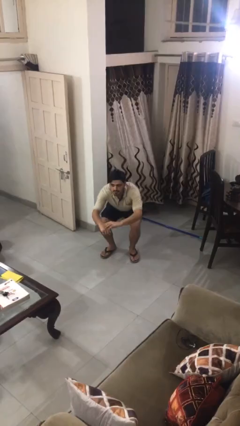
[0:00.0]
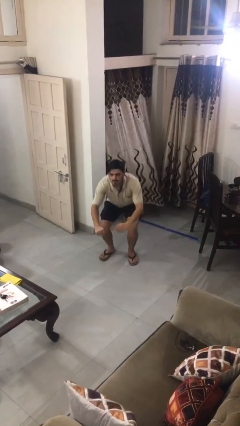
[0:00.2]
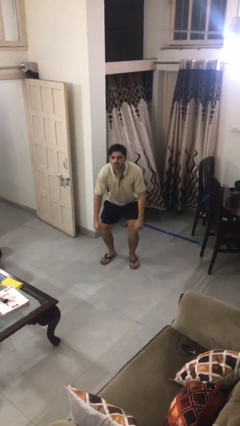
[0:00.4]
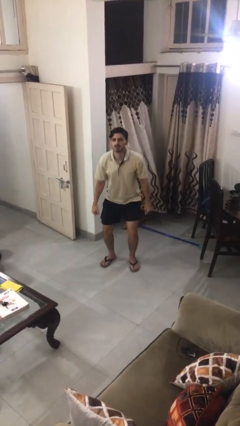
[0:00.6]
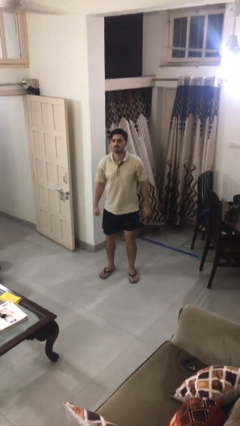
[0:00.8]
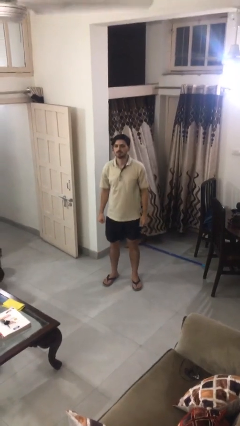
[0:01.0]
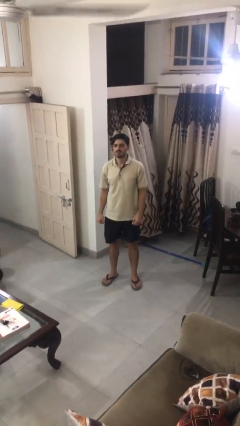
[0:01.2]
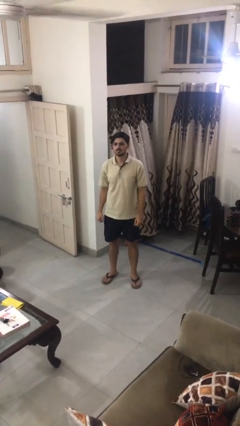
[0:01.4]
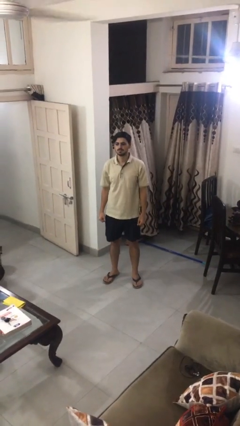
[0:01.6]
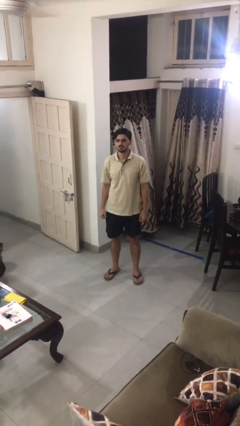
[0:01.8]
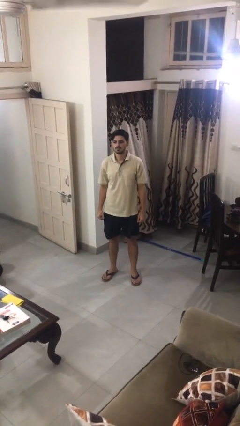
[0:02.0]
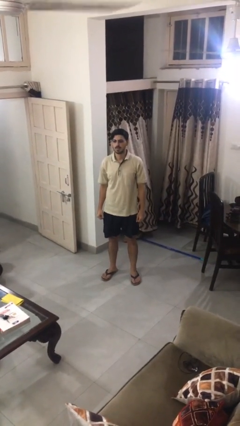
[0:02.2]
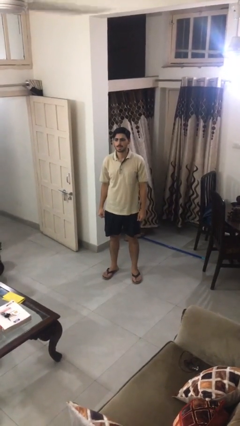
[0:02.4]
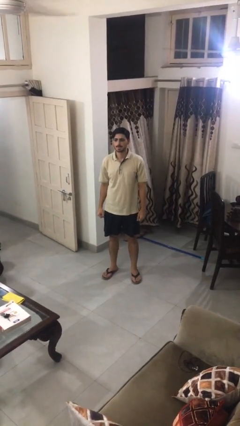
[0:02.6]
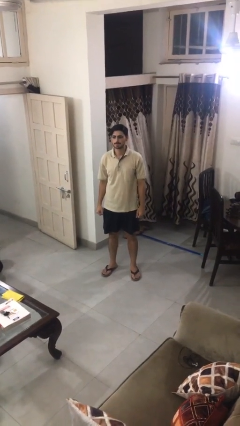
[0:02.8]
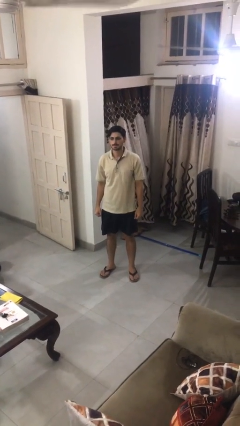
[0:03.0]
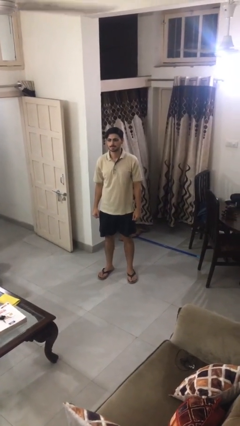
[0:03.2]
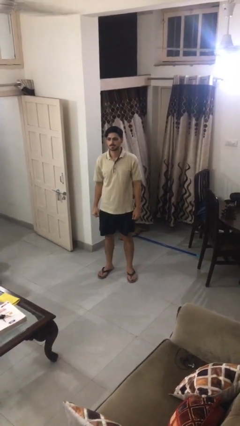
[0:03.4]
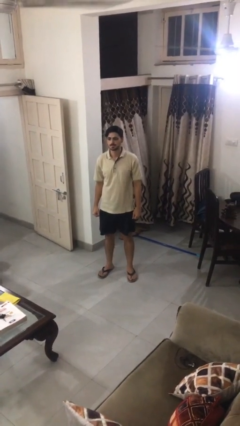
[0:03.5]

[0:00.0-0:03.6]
person stands up

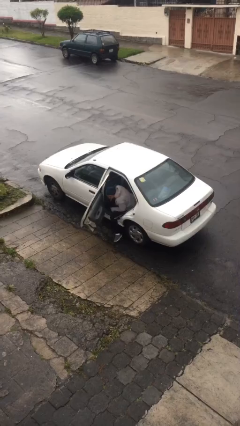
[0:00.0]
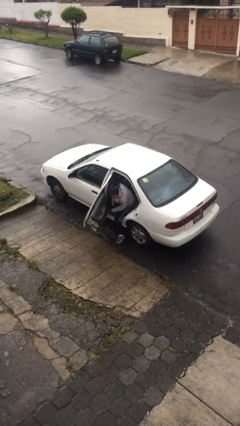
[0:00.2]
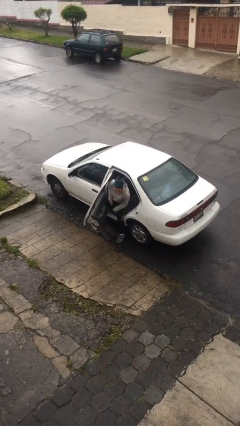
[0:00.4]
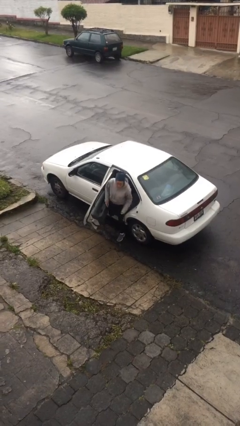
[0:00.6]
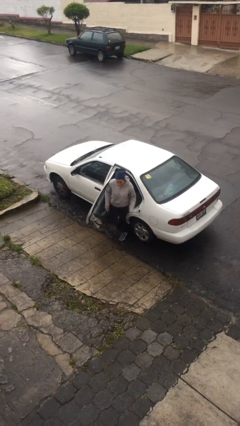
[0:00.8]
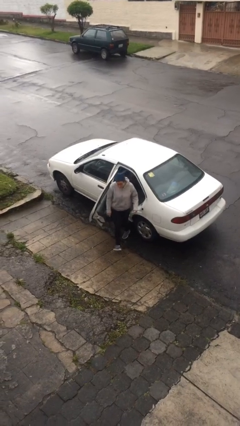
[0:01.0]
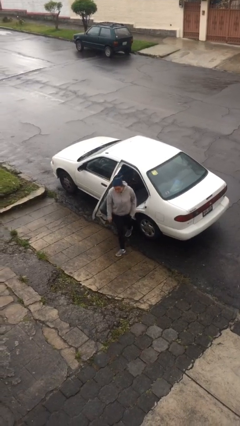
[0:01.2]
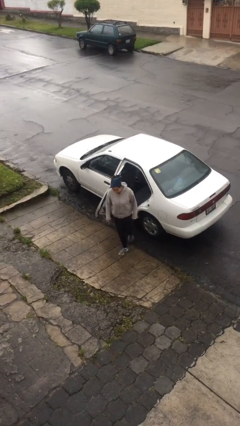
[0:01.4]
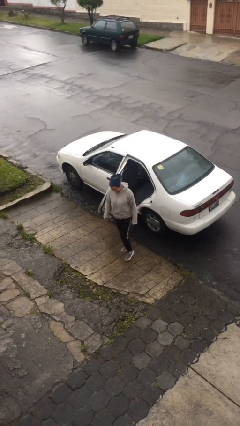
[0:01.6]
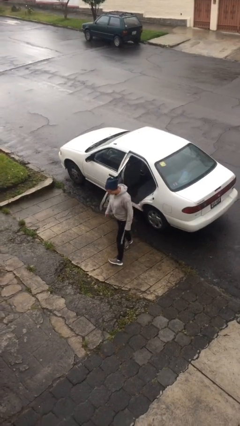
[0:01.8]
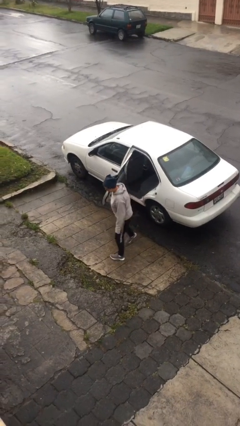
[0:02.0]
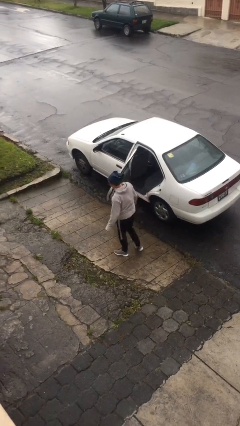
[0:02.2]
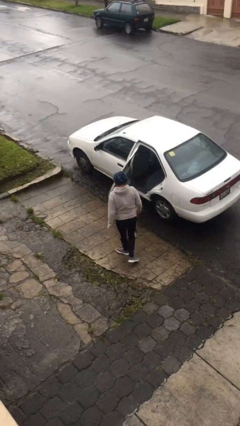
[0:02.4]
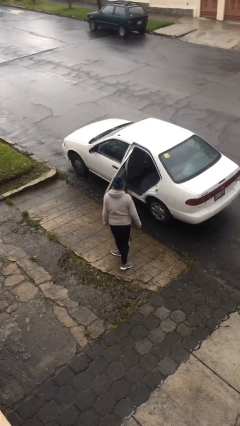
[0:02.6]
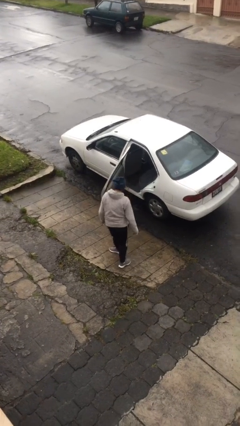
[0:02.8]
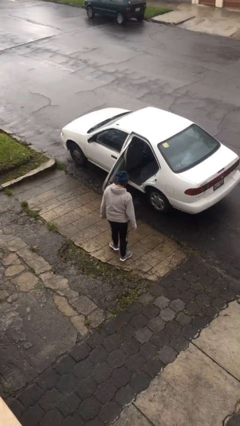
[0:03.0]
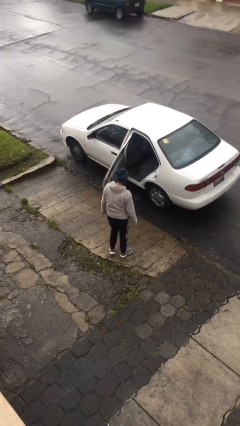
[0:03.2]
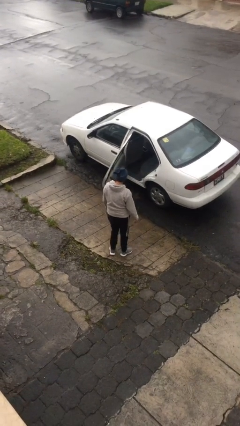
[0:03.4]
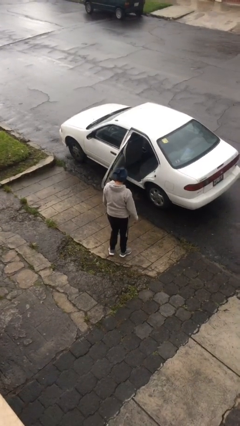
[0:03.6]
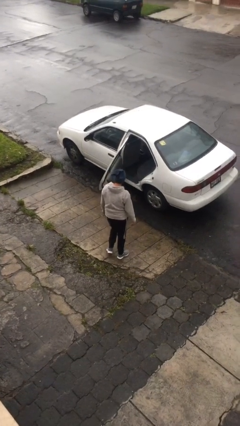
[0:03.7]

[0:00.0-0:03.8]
person exits car

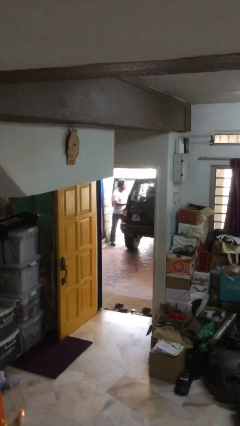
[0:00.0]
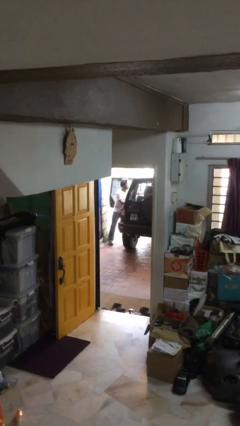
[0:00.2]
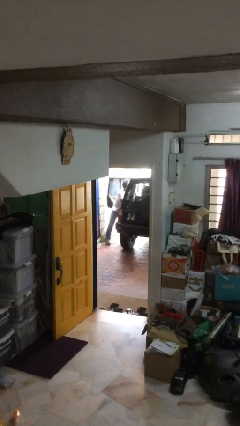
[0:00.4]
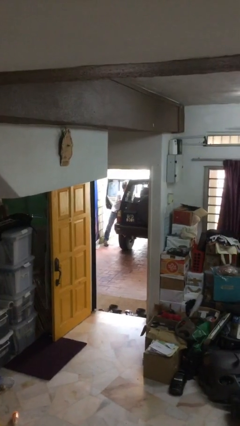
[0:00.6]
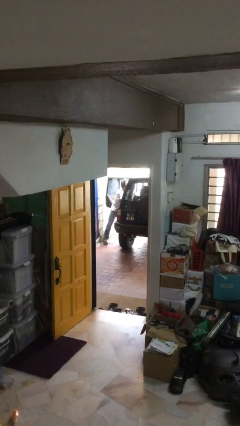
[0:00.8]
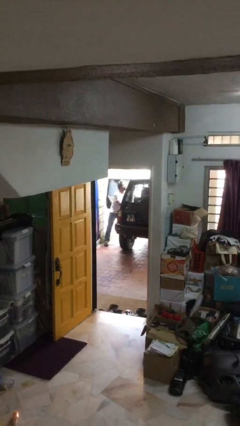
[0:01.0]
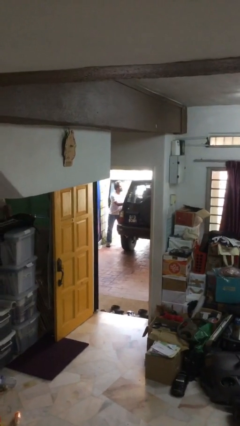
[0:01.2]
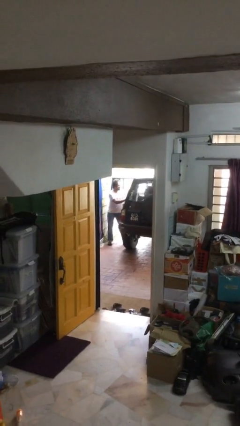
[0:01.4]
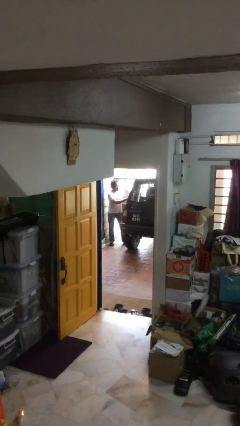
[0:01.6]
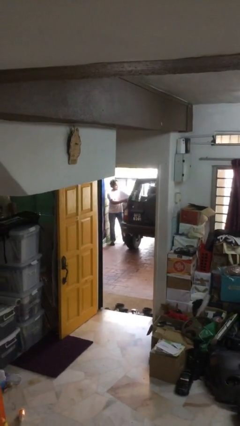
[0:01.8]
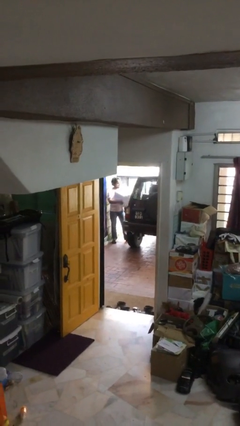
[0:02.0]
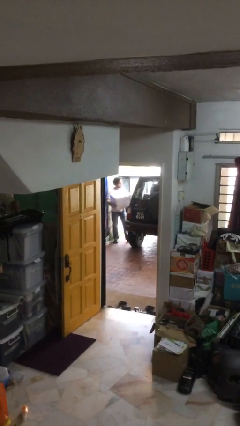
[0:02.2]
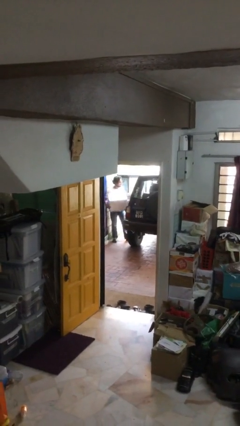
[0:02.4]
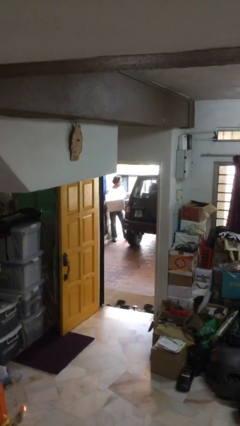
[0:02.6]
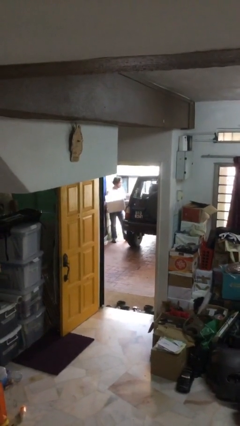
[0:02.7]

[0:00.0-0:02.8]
person unloads car

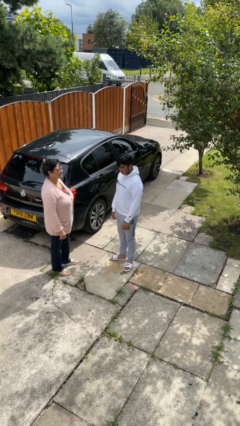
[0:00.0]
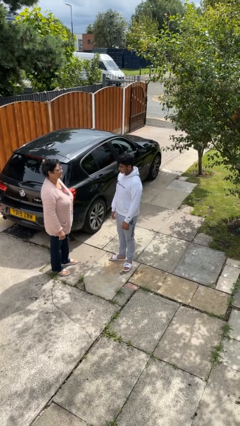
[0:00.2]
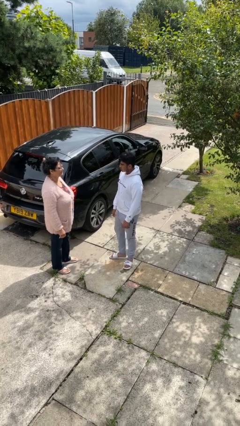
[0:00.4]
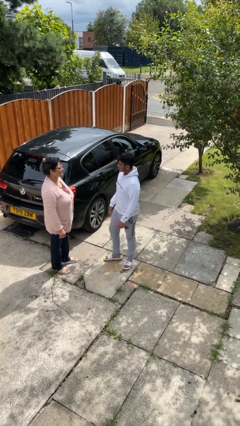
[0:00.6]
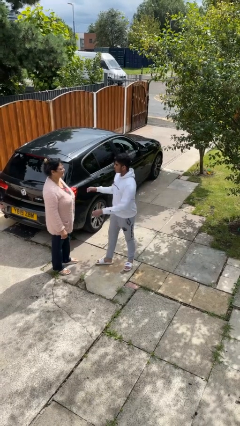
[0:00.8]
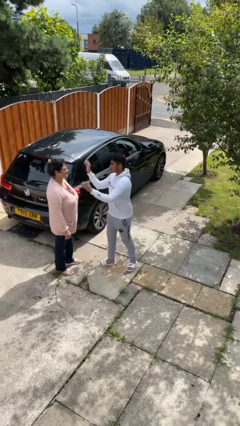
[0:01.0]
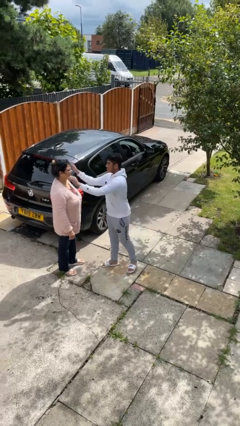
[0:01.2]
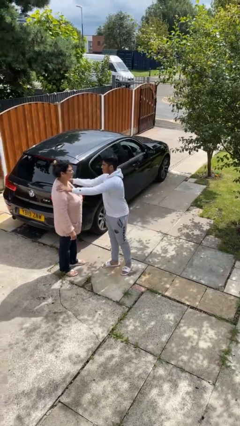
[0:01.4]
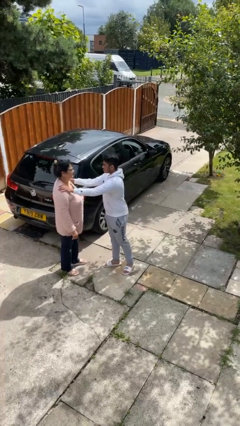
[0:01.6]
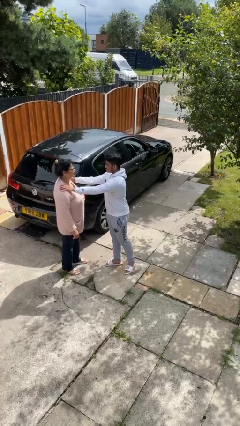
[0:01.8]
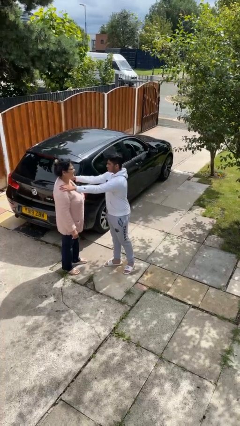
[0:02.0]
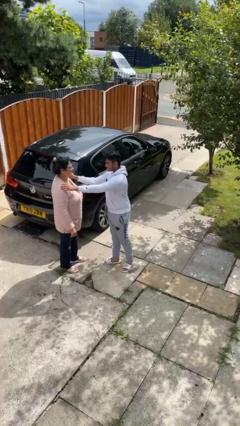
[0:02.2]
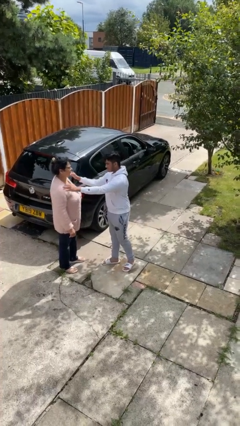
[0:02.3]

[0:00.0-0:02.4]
person pounds shoulders of person

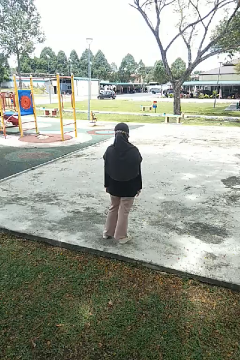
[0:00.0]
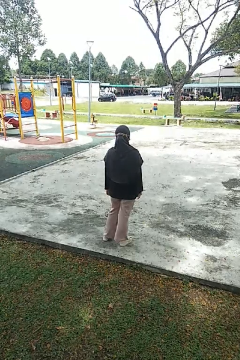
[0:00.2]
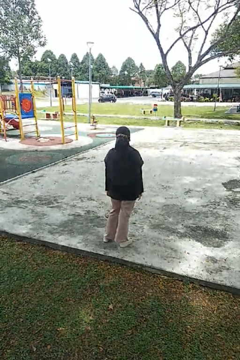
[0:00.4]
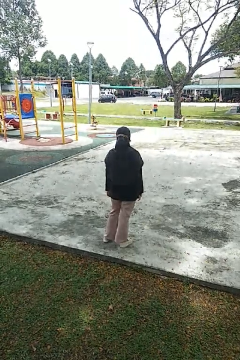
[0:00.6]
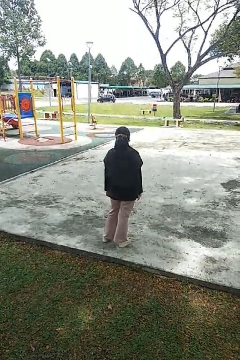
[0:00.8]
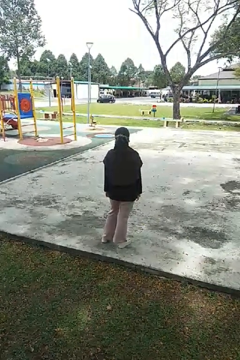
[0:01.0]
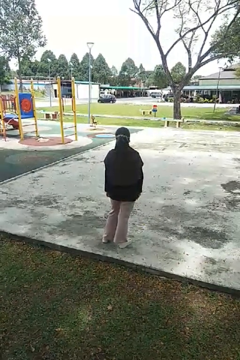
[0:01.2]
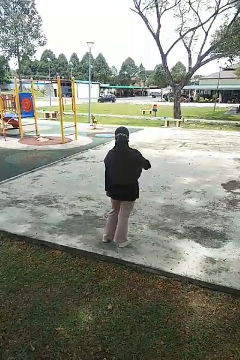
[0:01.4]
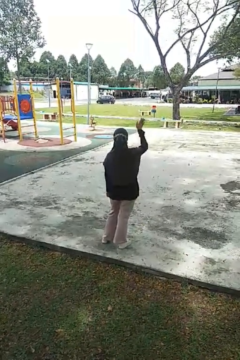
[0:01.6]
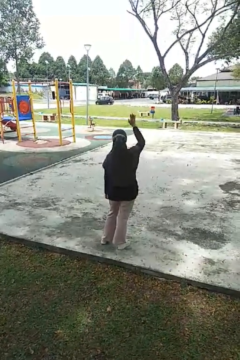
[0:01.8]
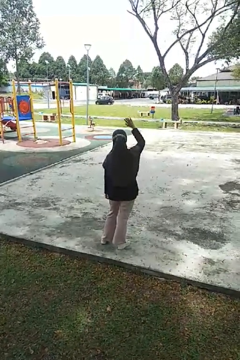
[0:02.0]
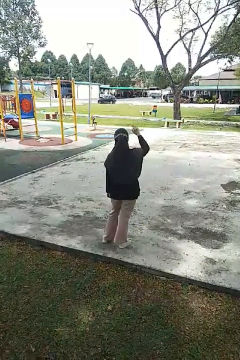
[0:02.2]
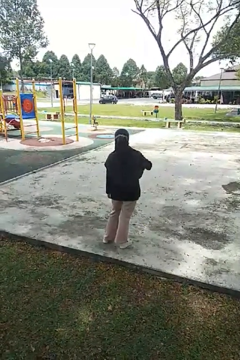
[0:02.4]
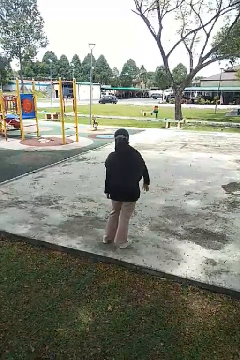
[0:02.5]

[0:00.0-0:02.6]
person waves at person

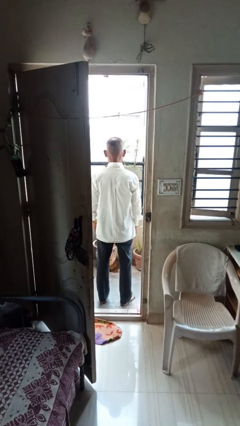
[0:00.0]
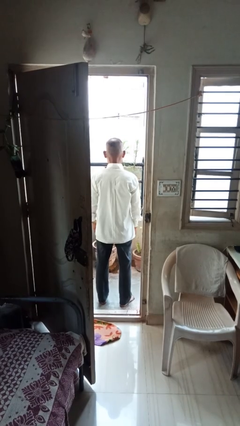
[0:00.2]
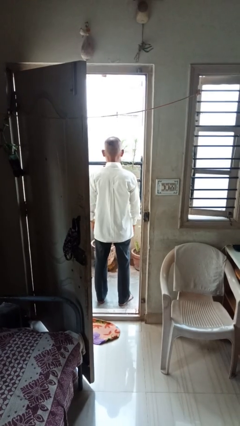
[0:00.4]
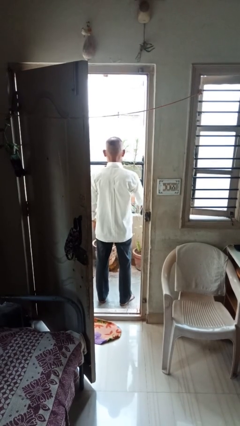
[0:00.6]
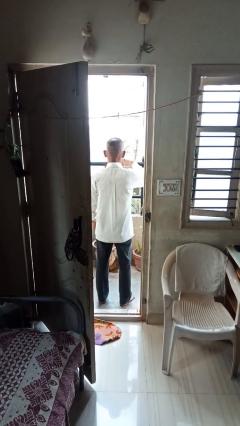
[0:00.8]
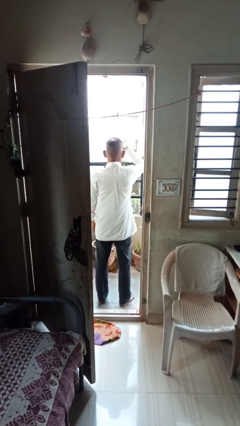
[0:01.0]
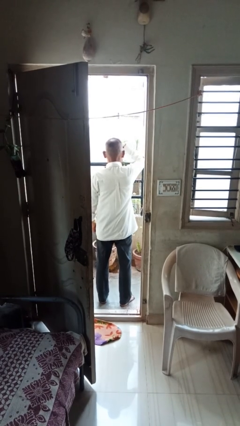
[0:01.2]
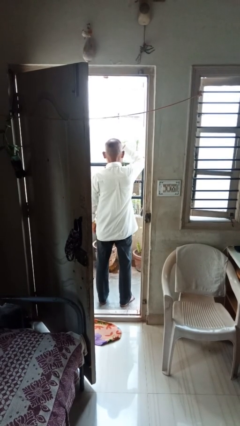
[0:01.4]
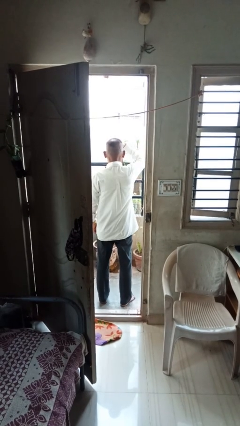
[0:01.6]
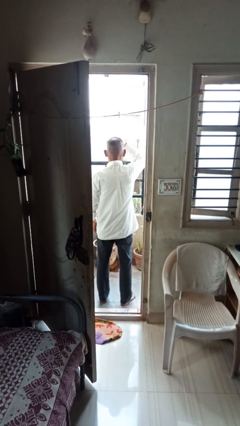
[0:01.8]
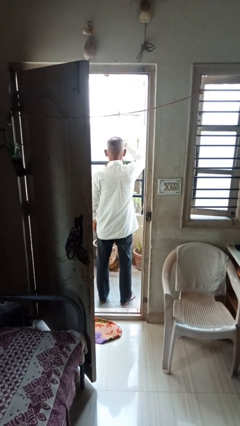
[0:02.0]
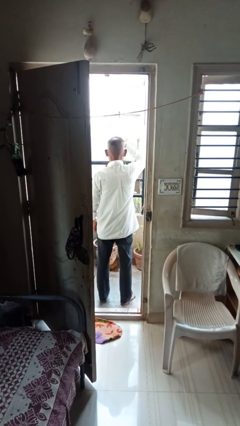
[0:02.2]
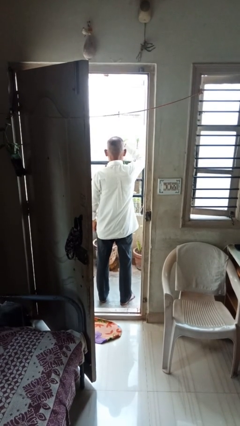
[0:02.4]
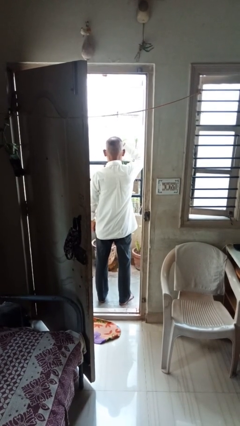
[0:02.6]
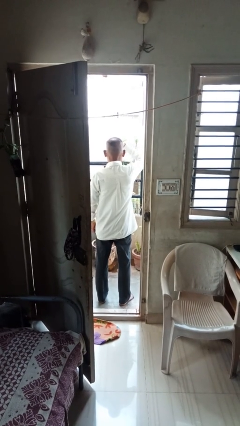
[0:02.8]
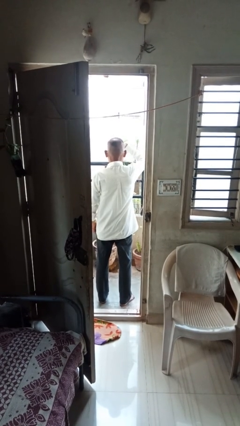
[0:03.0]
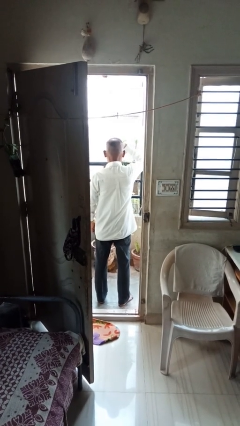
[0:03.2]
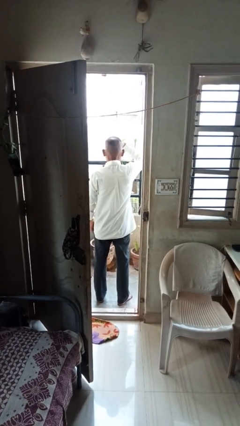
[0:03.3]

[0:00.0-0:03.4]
person shades eyes
